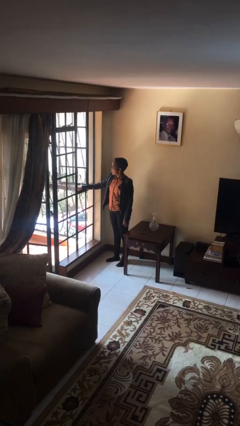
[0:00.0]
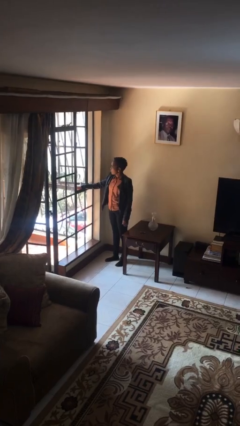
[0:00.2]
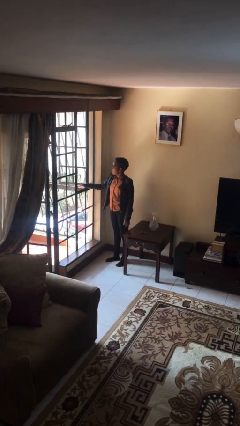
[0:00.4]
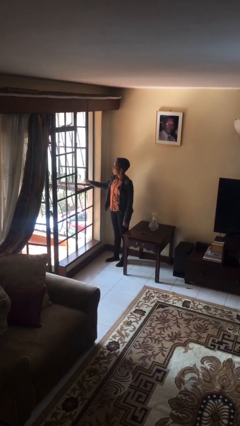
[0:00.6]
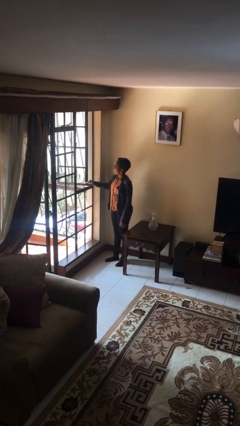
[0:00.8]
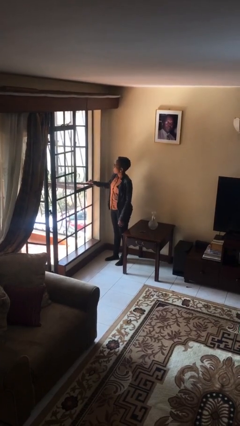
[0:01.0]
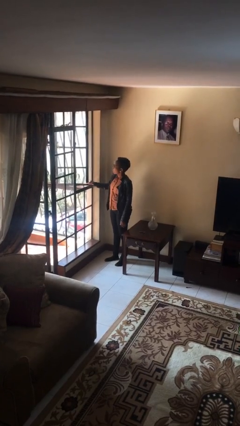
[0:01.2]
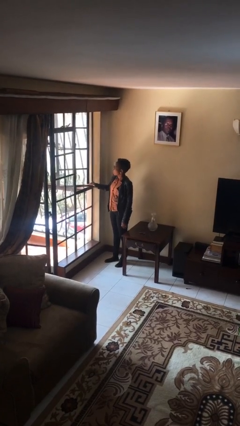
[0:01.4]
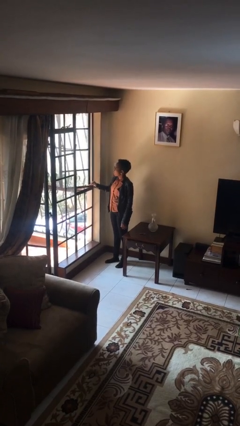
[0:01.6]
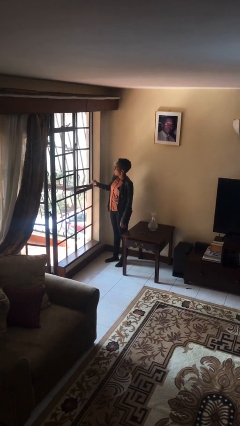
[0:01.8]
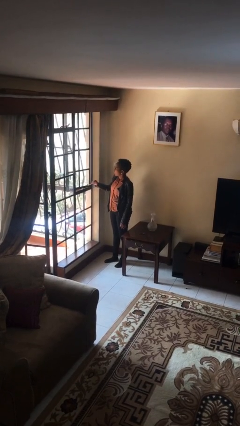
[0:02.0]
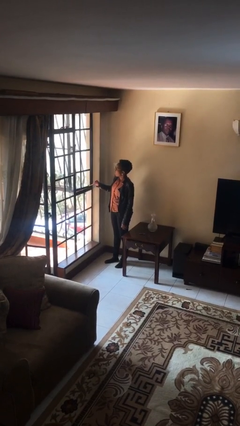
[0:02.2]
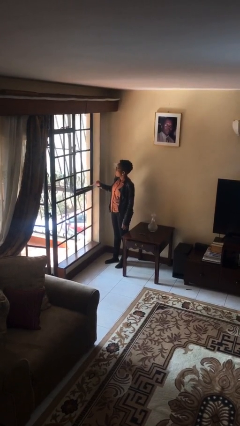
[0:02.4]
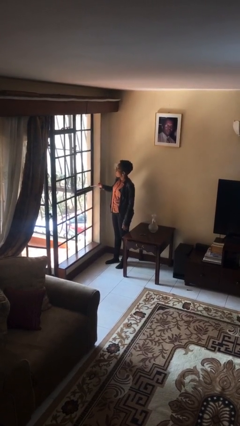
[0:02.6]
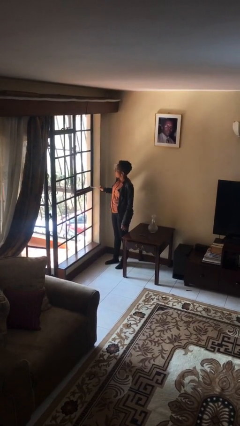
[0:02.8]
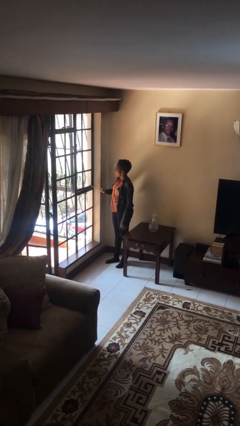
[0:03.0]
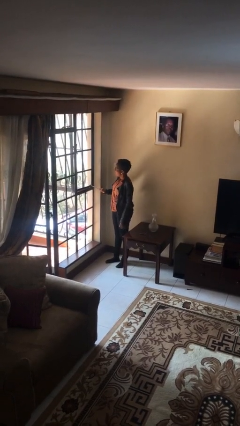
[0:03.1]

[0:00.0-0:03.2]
person closes home window

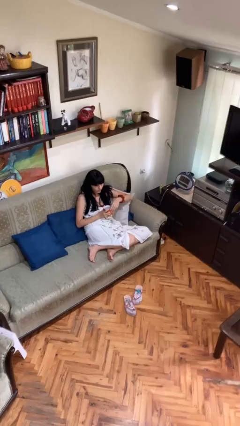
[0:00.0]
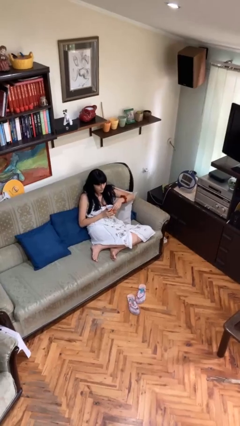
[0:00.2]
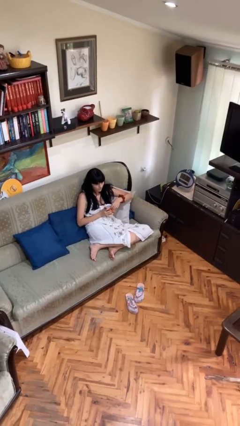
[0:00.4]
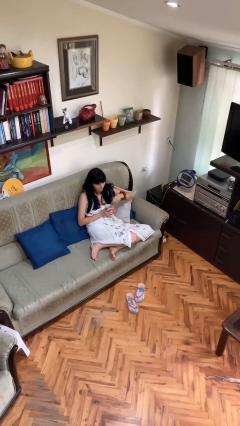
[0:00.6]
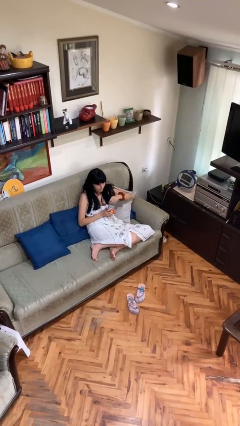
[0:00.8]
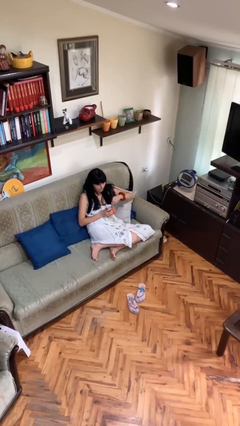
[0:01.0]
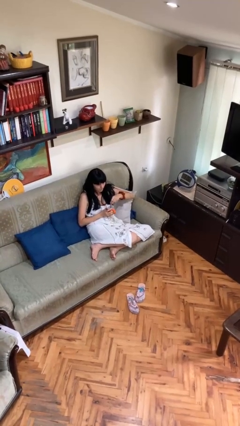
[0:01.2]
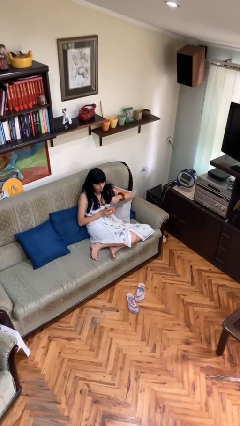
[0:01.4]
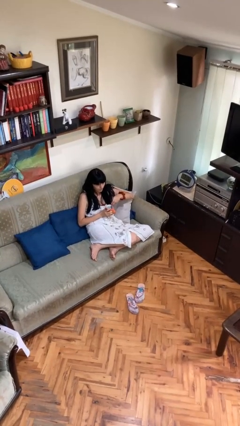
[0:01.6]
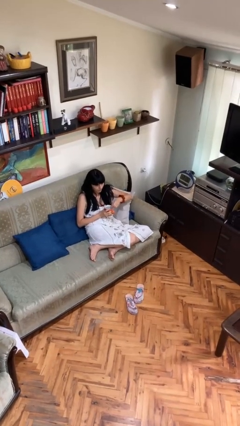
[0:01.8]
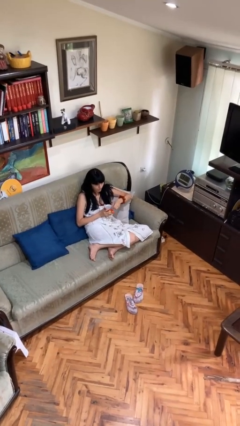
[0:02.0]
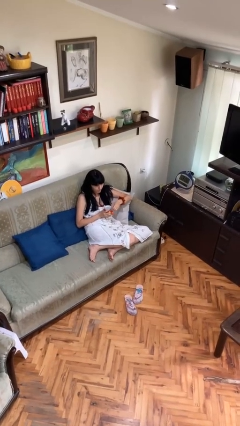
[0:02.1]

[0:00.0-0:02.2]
person stirs mug

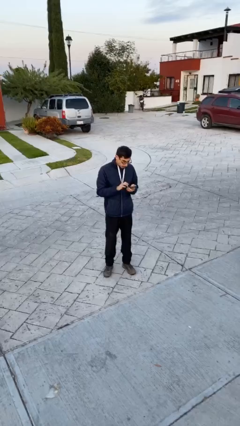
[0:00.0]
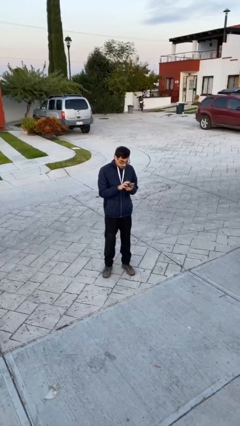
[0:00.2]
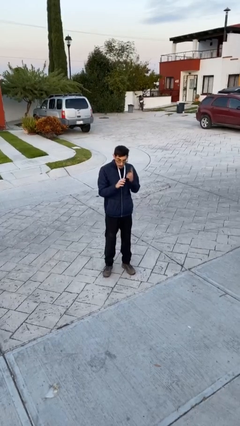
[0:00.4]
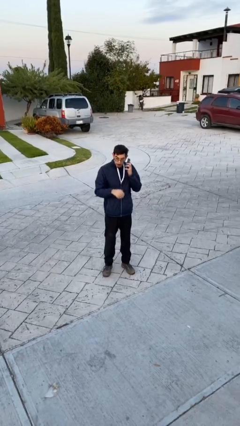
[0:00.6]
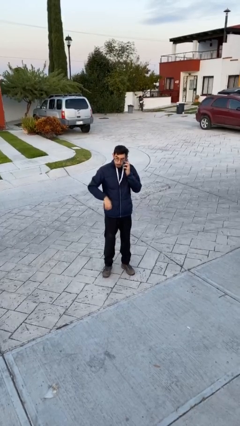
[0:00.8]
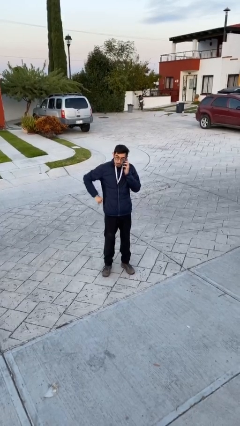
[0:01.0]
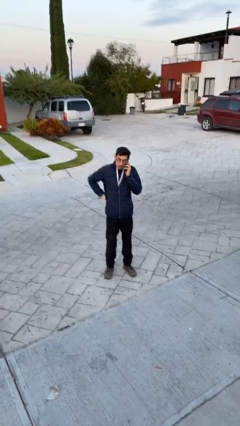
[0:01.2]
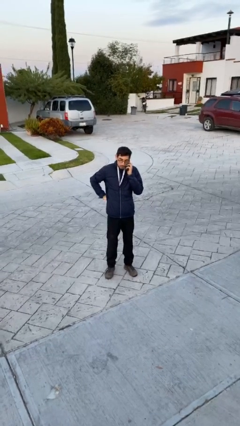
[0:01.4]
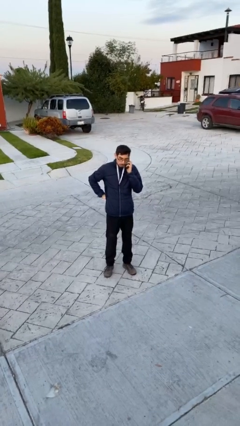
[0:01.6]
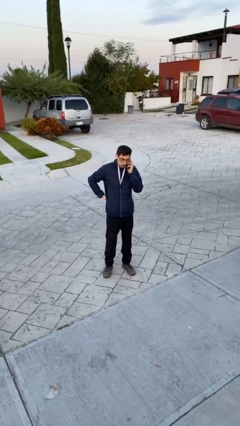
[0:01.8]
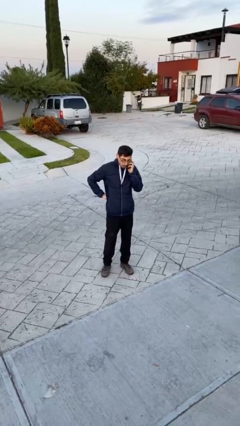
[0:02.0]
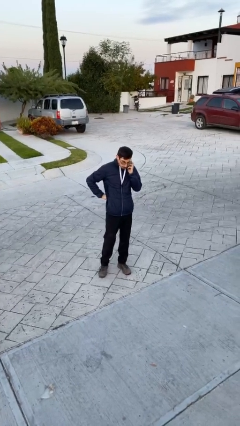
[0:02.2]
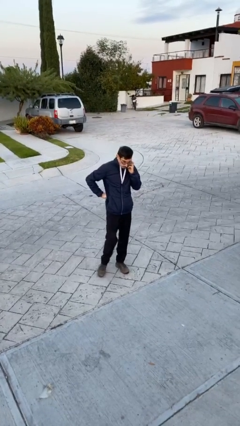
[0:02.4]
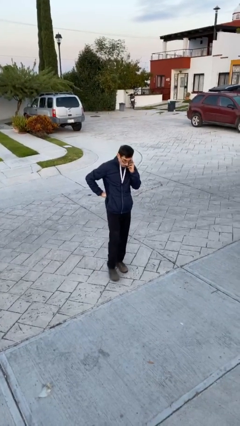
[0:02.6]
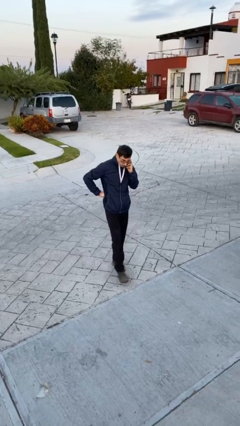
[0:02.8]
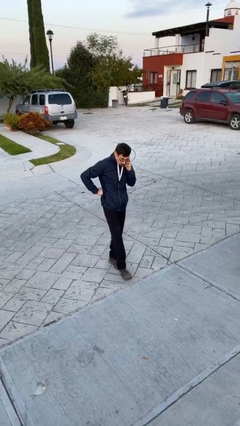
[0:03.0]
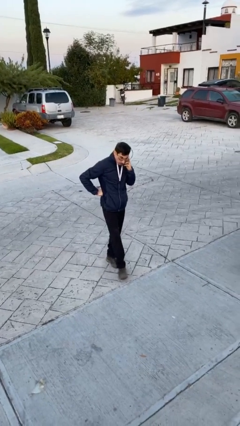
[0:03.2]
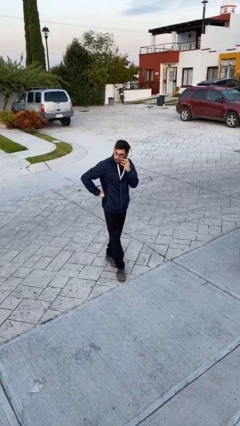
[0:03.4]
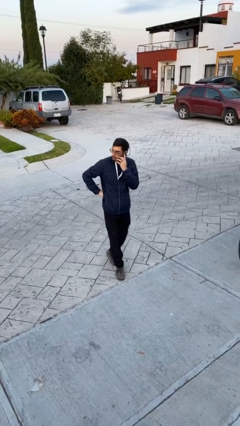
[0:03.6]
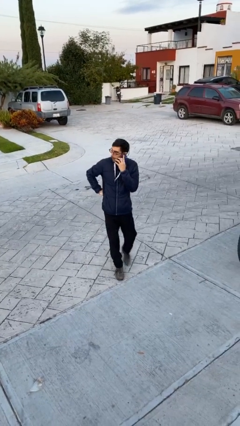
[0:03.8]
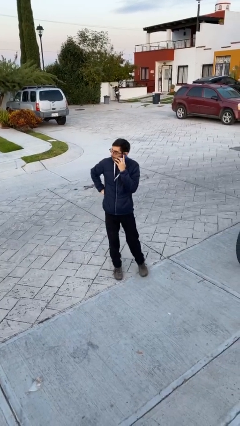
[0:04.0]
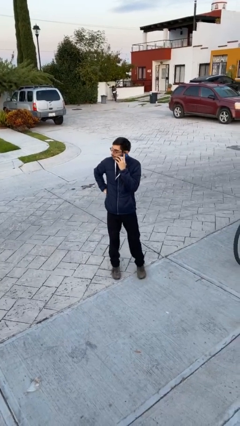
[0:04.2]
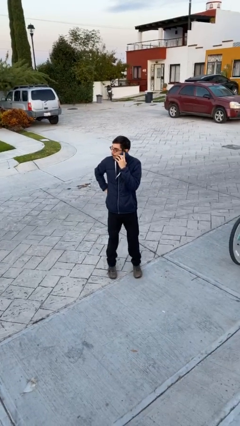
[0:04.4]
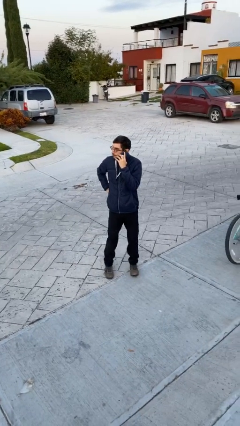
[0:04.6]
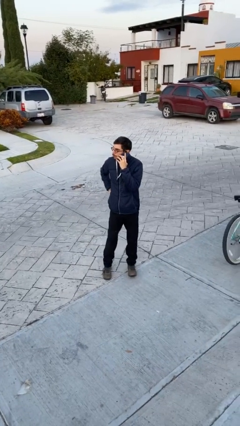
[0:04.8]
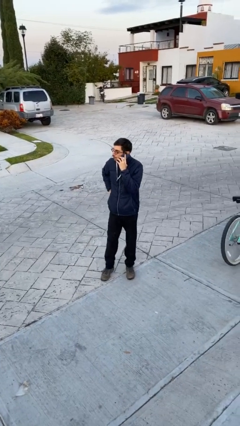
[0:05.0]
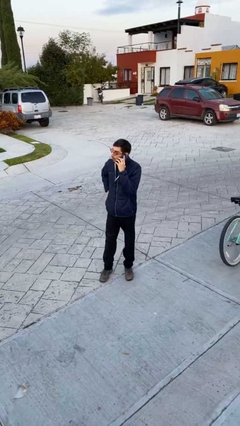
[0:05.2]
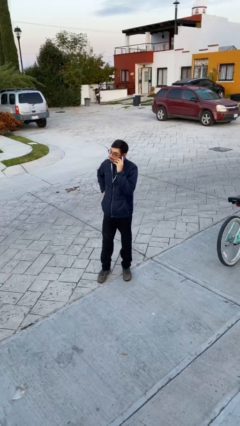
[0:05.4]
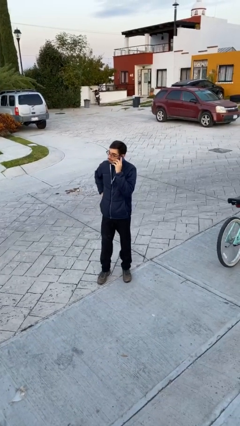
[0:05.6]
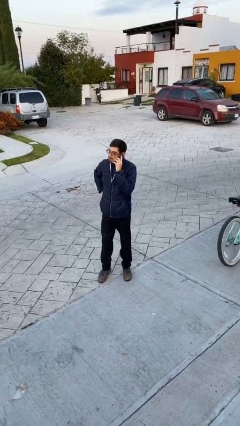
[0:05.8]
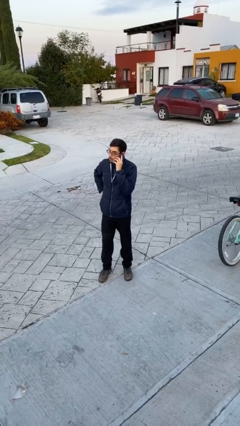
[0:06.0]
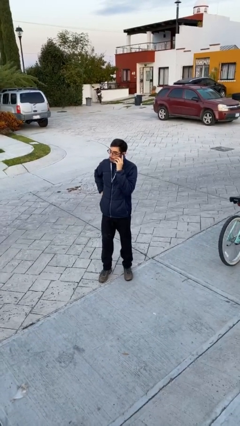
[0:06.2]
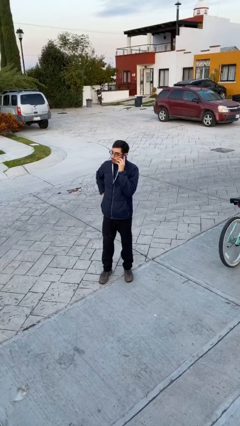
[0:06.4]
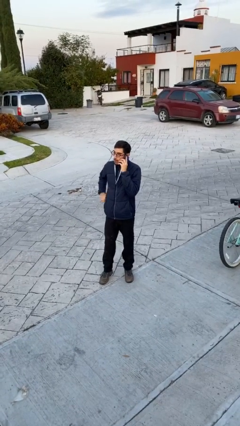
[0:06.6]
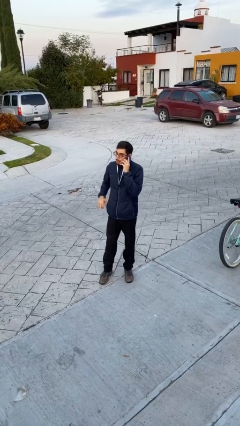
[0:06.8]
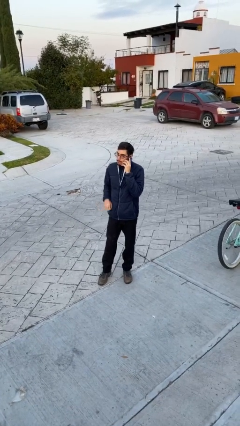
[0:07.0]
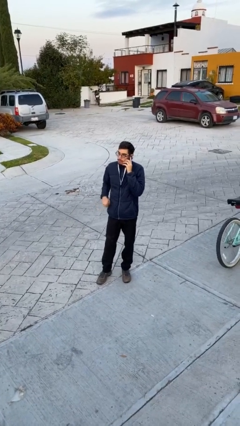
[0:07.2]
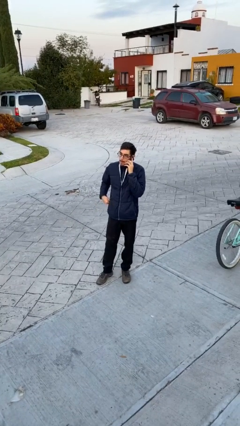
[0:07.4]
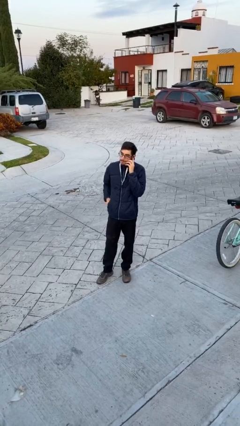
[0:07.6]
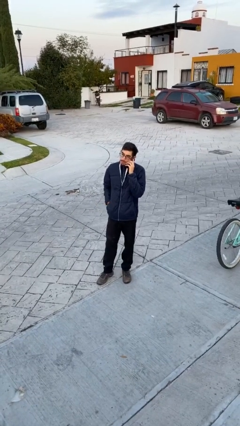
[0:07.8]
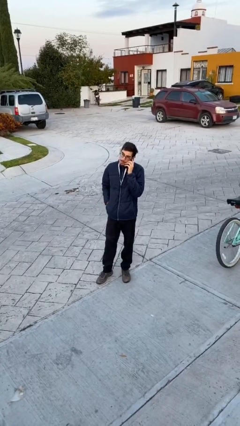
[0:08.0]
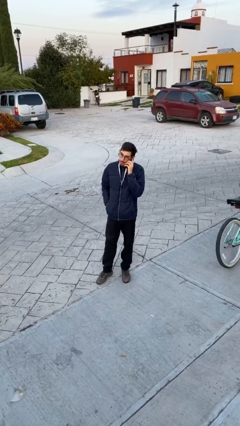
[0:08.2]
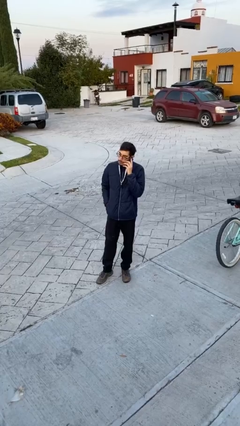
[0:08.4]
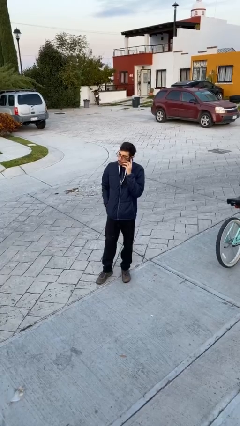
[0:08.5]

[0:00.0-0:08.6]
person talks on phone

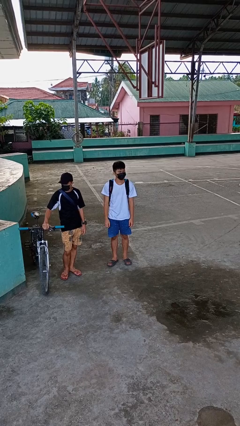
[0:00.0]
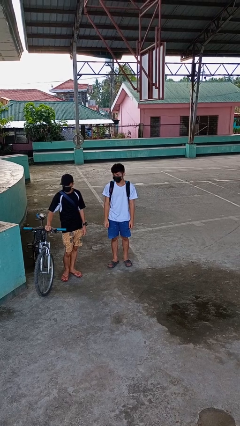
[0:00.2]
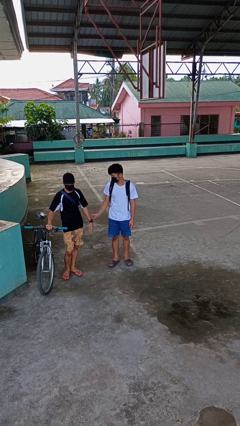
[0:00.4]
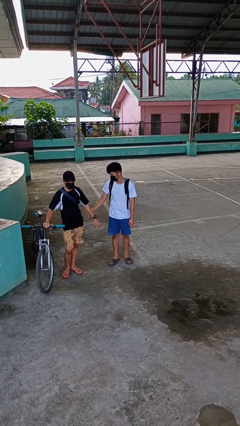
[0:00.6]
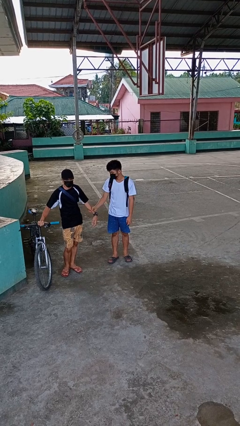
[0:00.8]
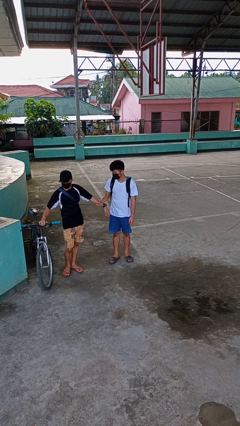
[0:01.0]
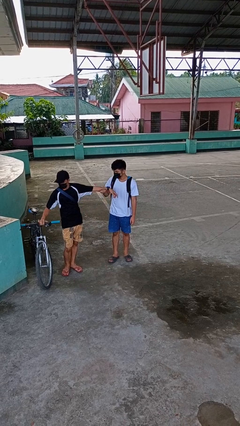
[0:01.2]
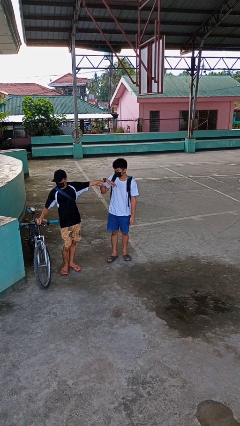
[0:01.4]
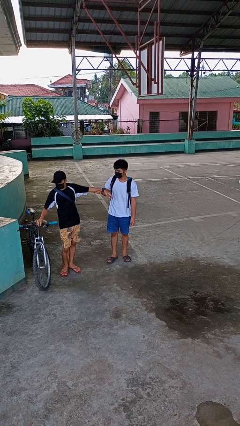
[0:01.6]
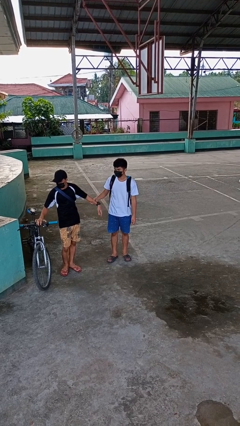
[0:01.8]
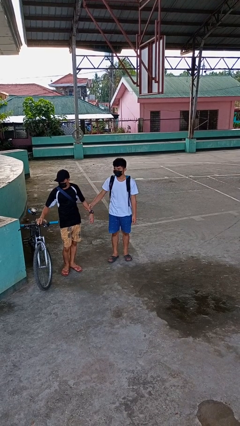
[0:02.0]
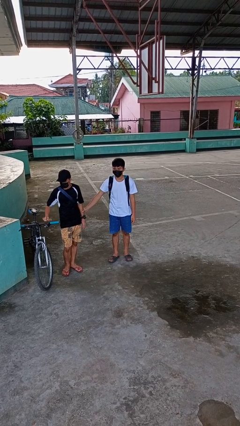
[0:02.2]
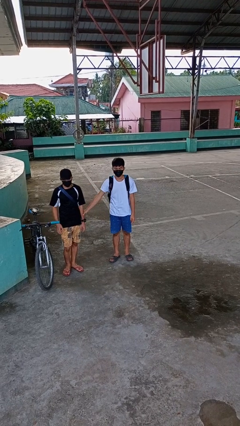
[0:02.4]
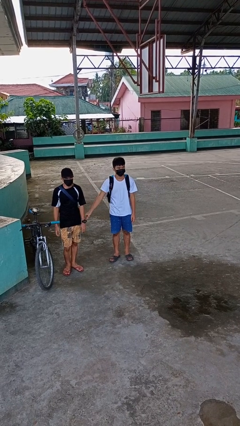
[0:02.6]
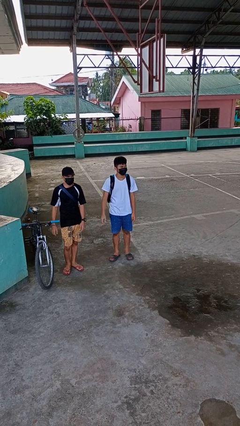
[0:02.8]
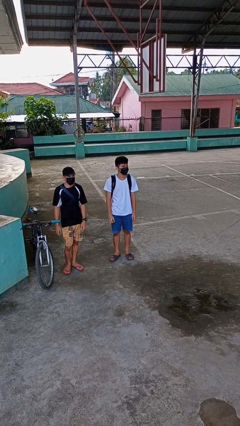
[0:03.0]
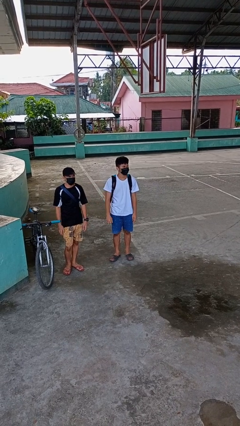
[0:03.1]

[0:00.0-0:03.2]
person grabs person by forearm

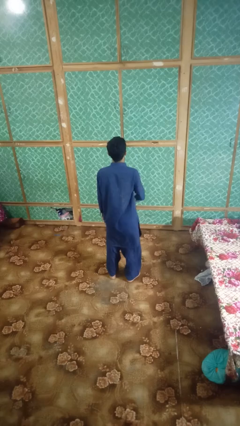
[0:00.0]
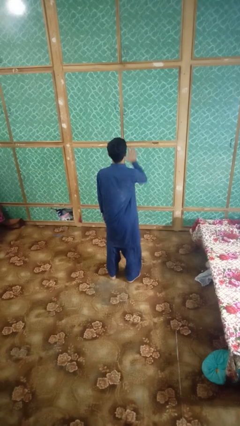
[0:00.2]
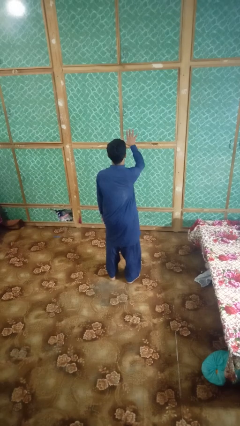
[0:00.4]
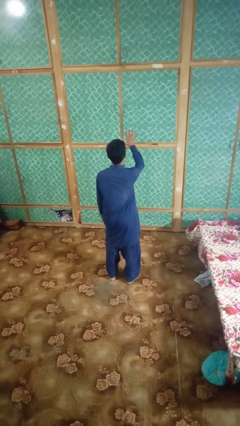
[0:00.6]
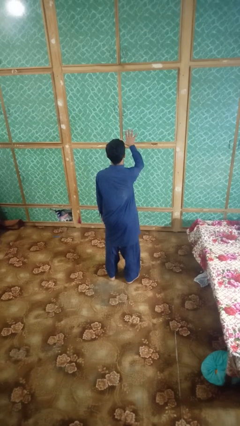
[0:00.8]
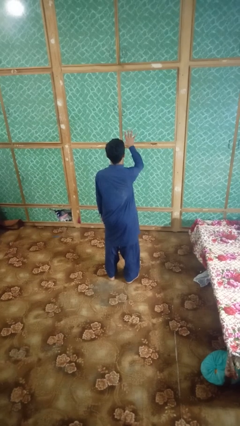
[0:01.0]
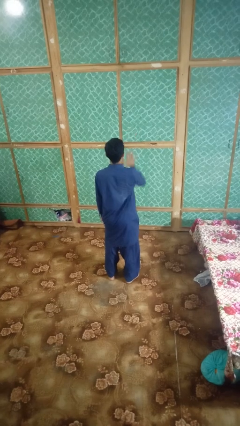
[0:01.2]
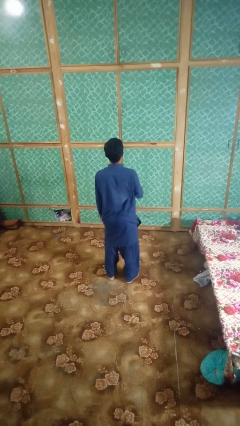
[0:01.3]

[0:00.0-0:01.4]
person gestures number five
